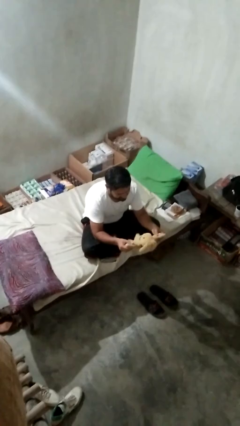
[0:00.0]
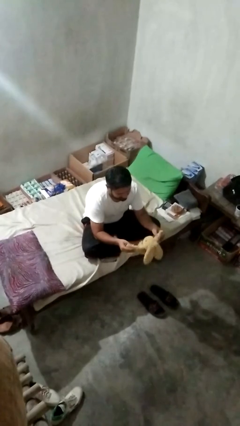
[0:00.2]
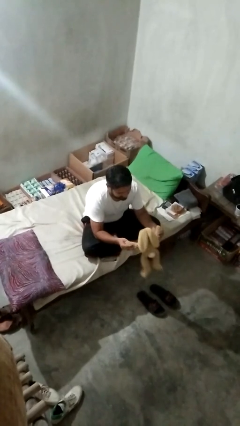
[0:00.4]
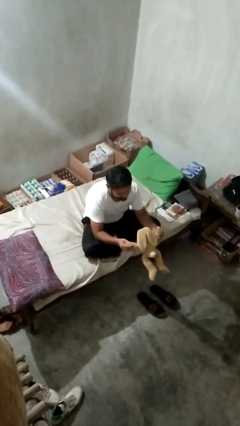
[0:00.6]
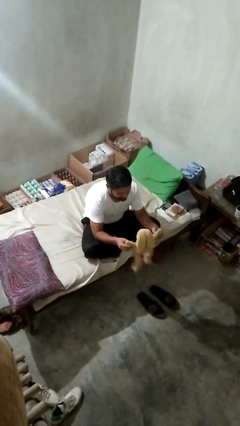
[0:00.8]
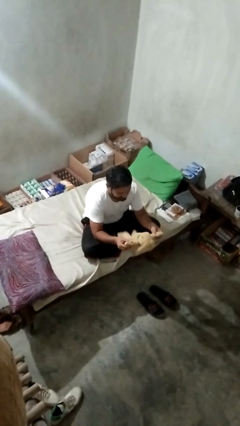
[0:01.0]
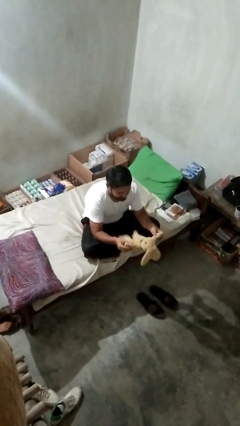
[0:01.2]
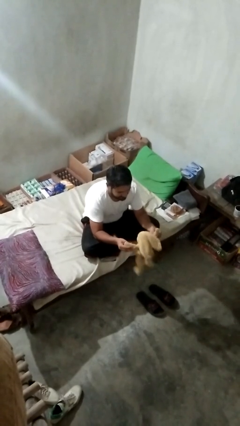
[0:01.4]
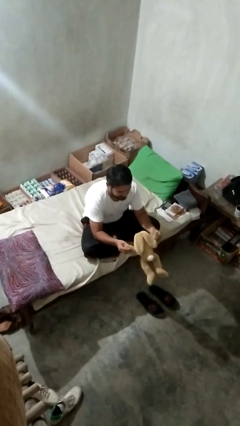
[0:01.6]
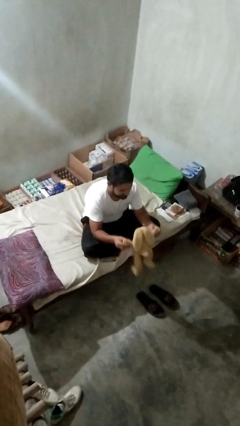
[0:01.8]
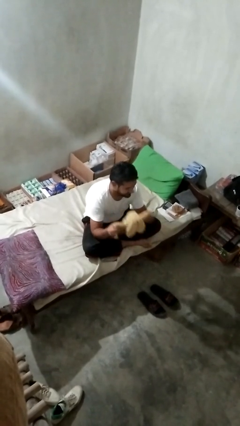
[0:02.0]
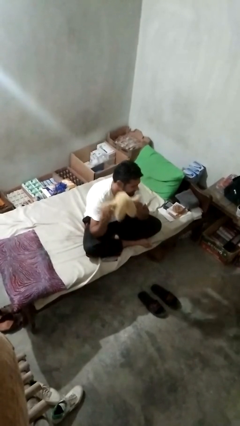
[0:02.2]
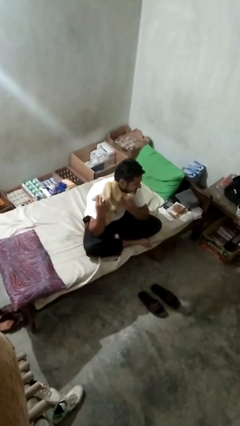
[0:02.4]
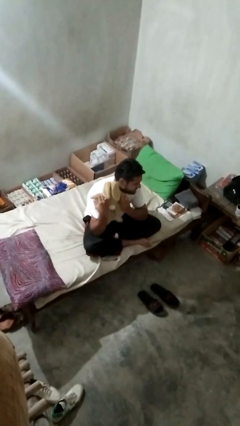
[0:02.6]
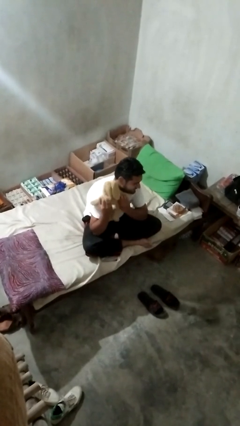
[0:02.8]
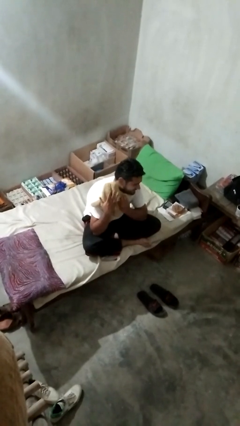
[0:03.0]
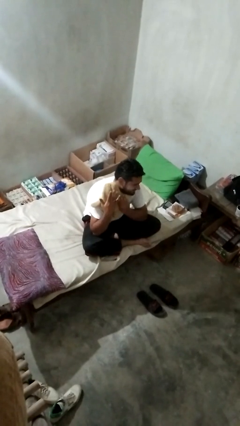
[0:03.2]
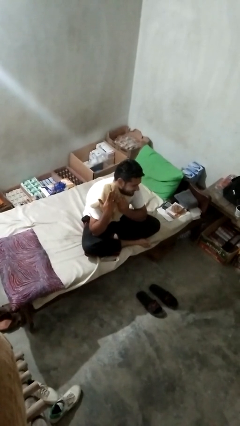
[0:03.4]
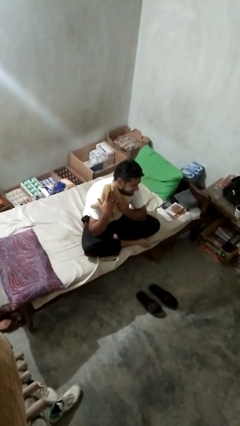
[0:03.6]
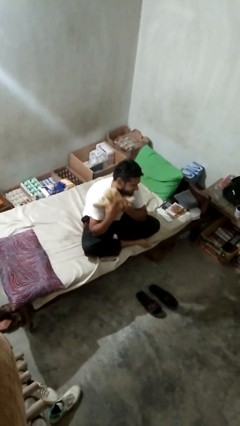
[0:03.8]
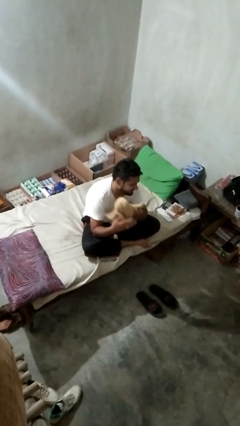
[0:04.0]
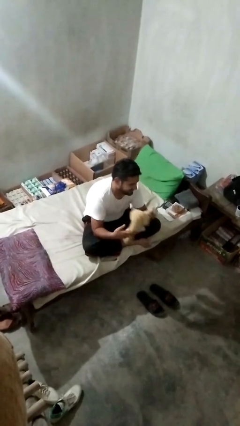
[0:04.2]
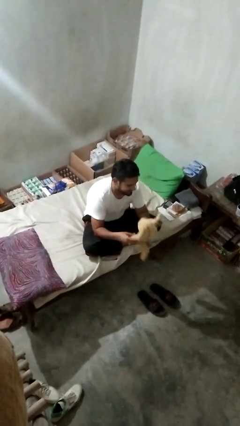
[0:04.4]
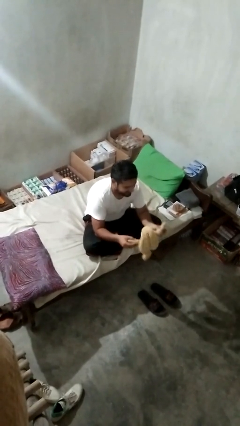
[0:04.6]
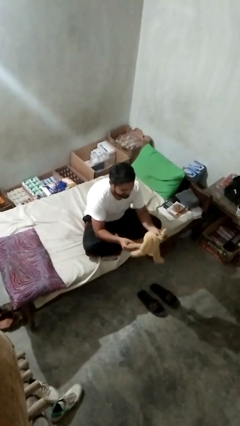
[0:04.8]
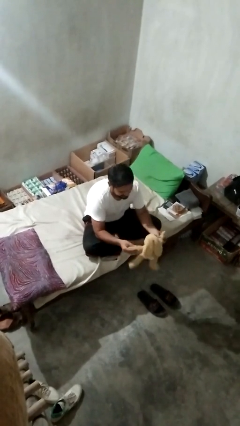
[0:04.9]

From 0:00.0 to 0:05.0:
person hugs stuffed animal

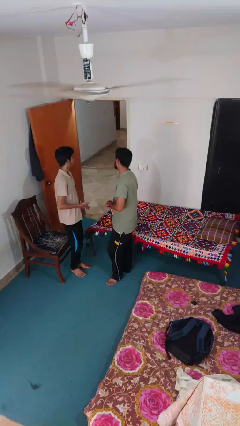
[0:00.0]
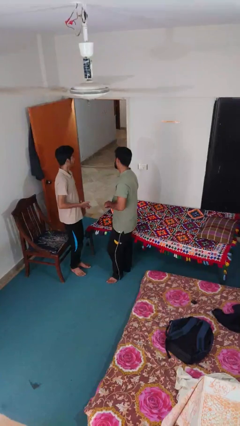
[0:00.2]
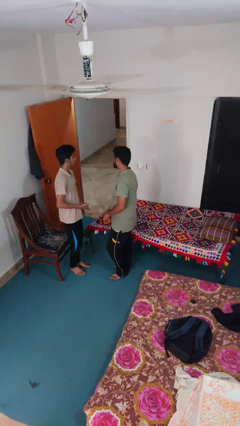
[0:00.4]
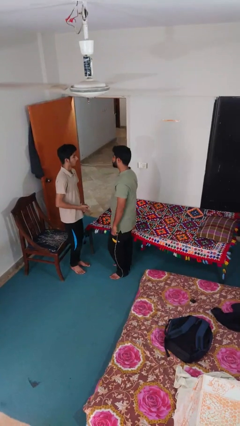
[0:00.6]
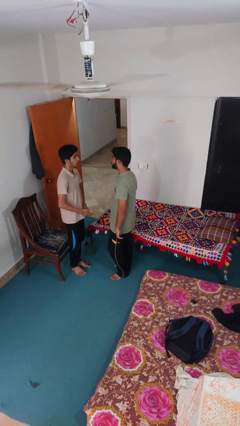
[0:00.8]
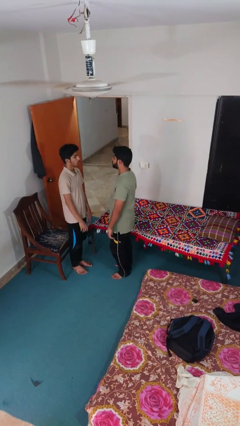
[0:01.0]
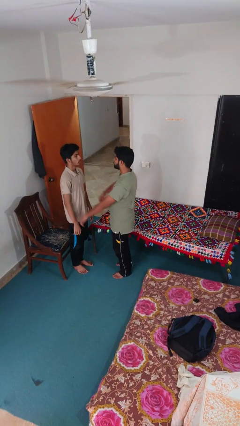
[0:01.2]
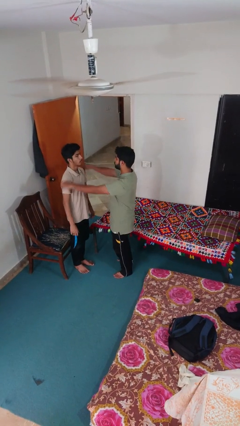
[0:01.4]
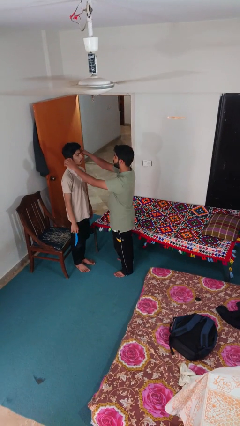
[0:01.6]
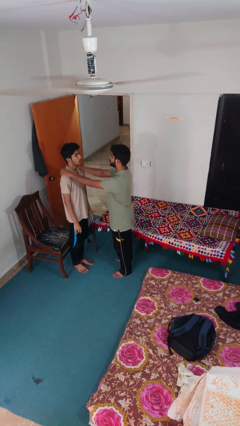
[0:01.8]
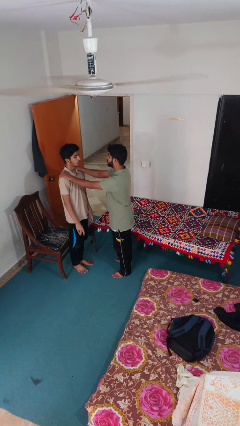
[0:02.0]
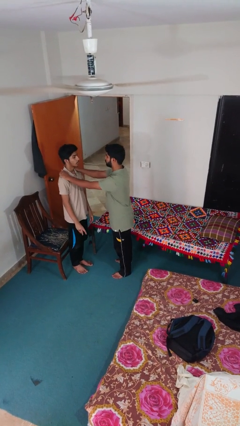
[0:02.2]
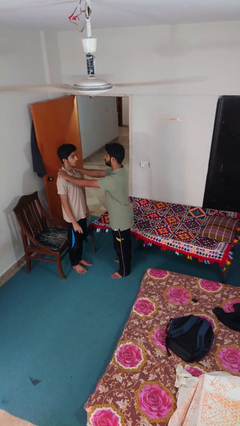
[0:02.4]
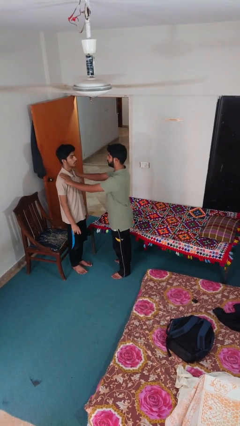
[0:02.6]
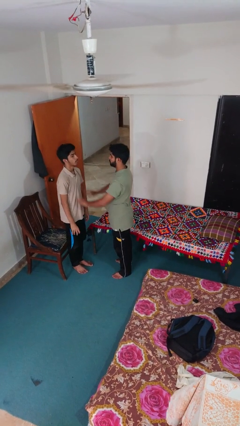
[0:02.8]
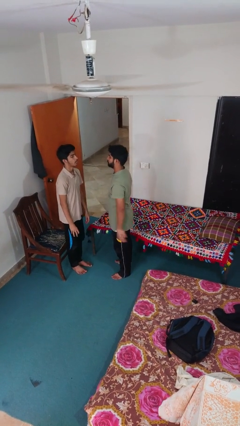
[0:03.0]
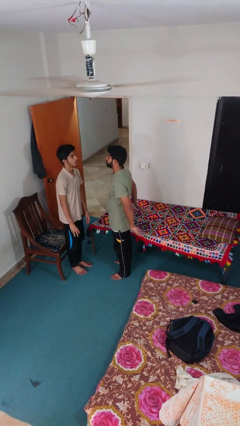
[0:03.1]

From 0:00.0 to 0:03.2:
person pounds shoulders of person

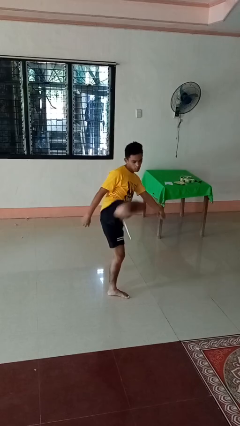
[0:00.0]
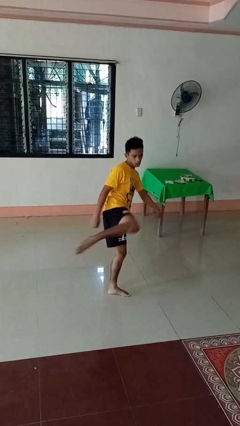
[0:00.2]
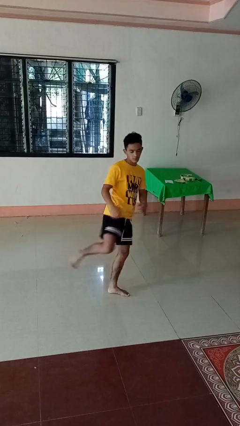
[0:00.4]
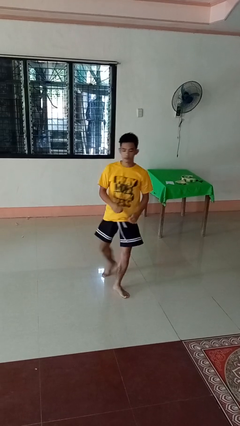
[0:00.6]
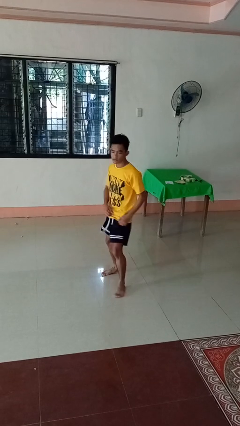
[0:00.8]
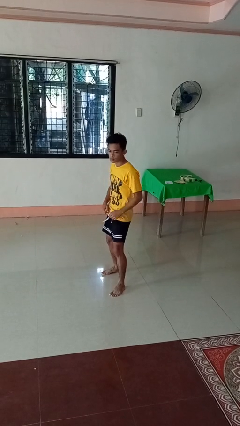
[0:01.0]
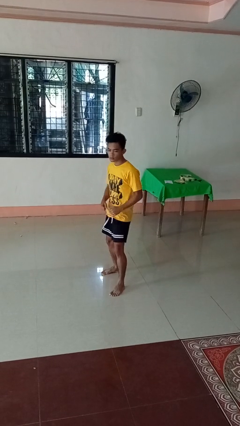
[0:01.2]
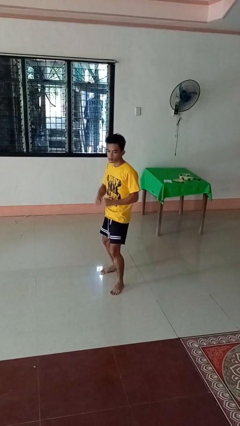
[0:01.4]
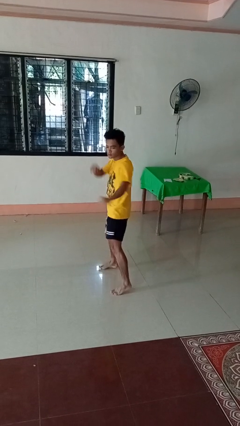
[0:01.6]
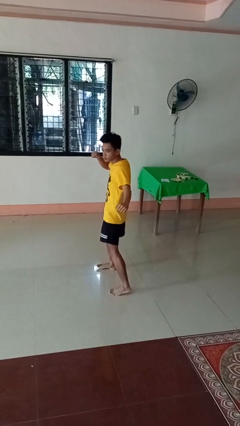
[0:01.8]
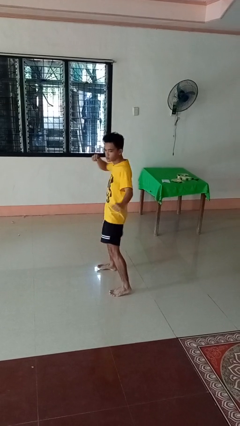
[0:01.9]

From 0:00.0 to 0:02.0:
person karate kicks

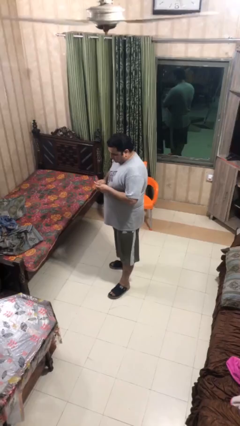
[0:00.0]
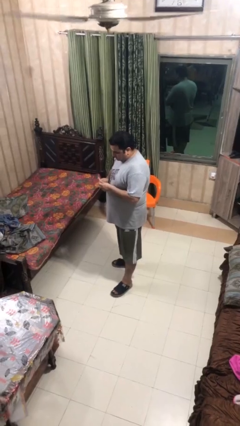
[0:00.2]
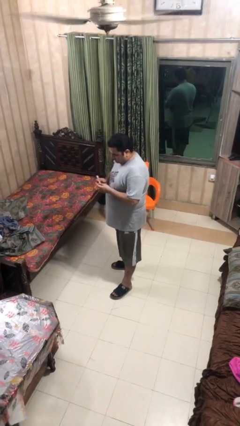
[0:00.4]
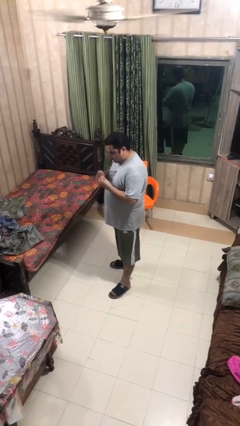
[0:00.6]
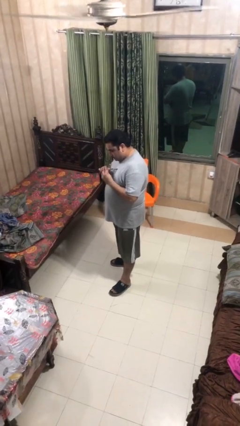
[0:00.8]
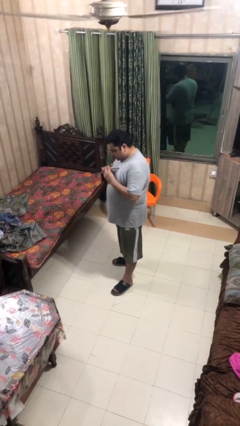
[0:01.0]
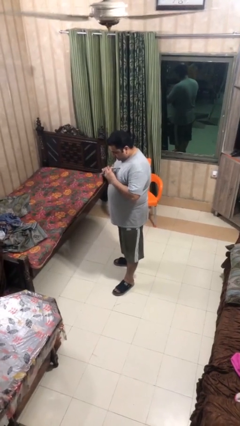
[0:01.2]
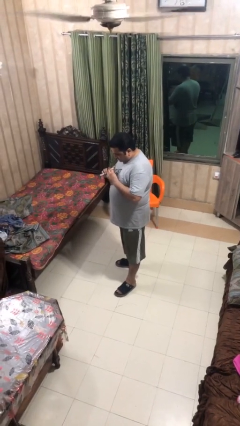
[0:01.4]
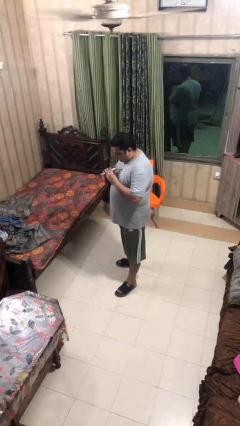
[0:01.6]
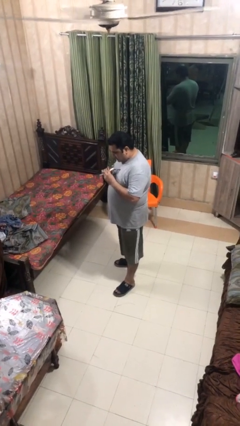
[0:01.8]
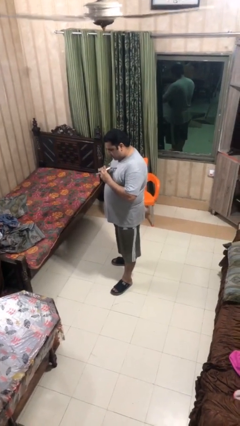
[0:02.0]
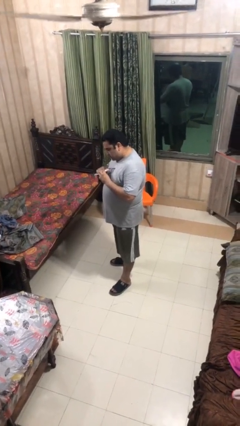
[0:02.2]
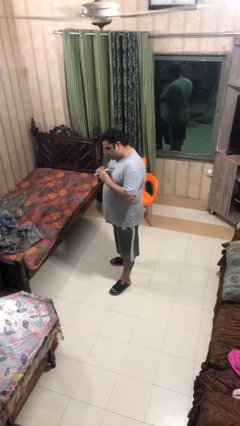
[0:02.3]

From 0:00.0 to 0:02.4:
person files fingernails

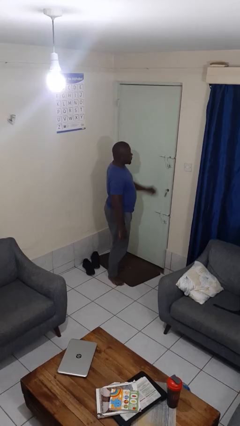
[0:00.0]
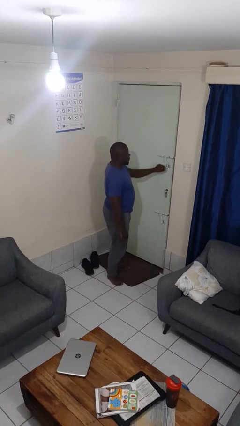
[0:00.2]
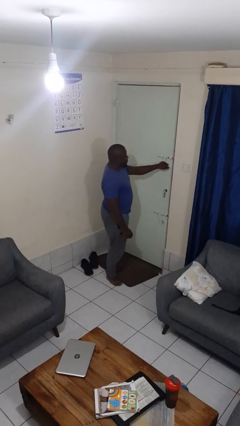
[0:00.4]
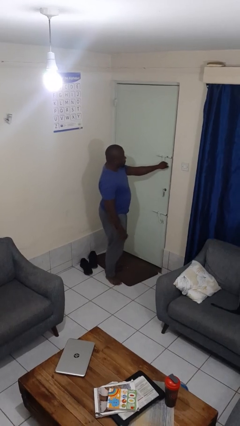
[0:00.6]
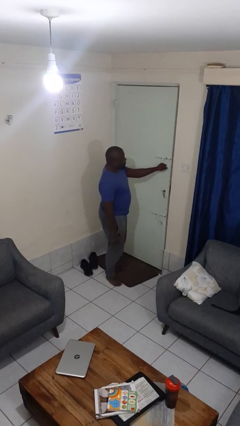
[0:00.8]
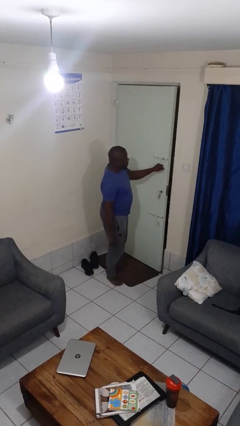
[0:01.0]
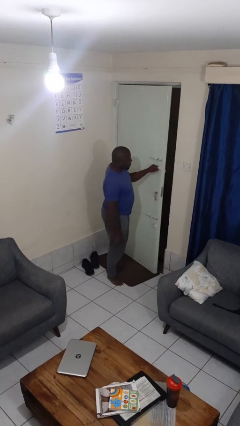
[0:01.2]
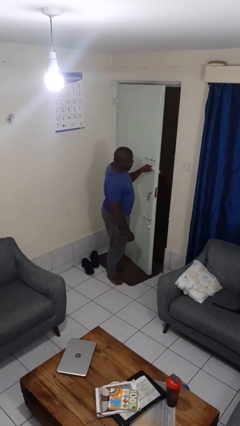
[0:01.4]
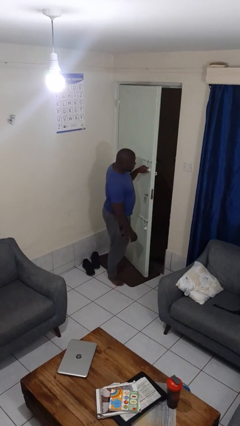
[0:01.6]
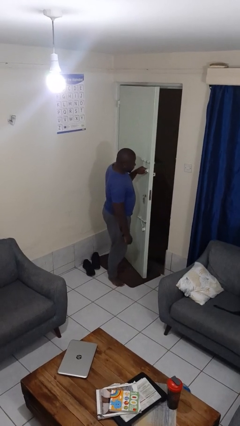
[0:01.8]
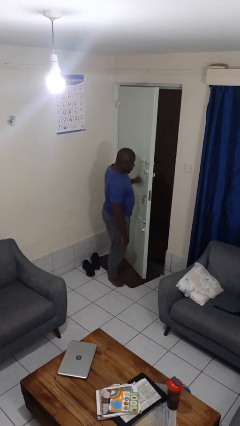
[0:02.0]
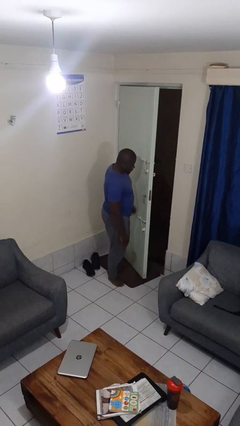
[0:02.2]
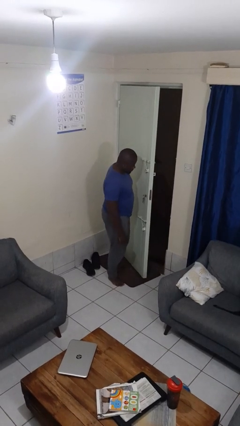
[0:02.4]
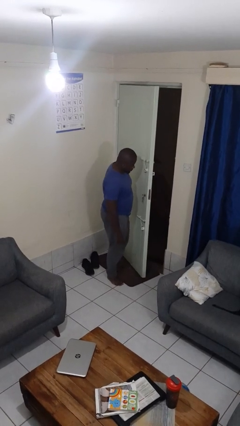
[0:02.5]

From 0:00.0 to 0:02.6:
person opens facility door

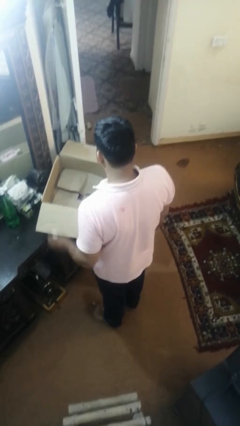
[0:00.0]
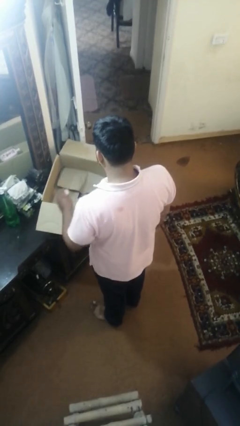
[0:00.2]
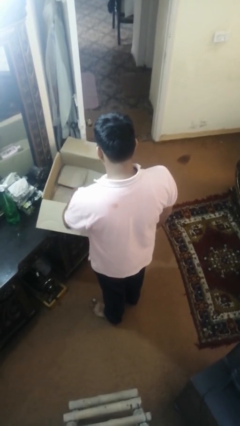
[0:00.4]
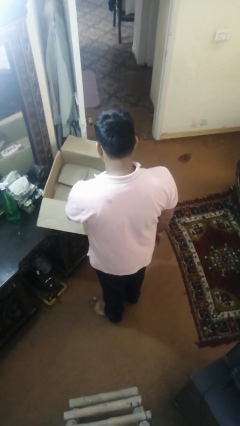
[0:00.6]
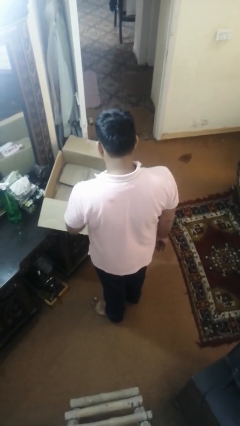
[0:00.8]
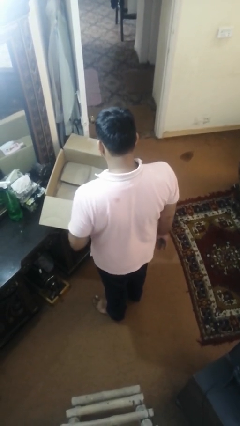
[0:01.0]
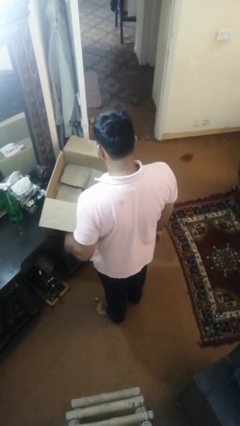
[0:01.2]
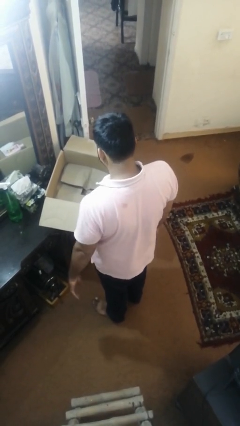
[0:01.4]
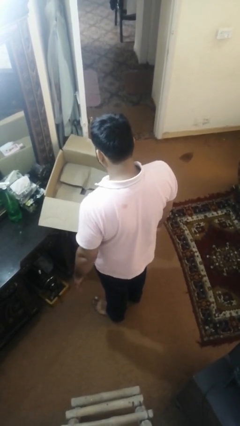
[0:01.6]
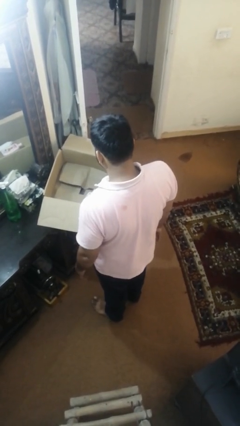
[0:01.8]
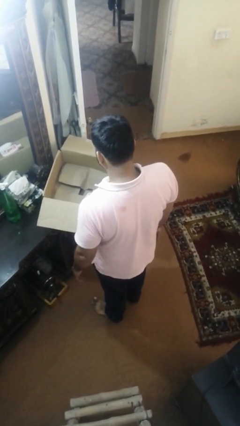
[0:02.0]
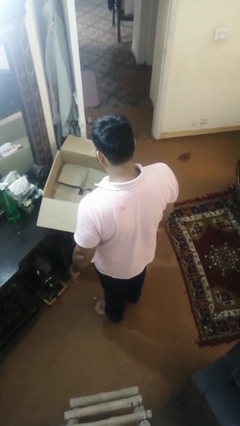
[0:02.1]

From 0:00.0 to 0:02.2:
person puts object into box
